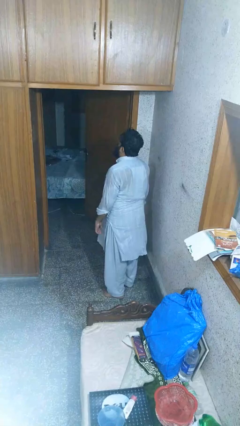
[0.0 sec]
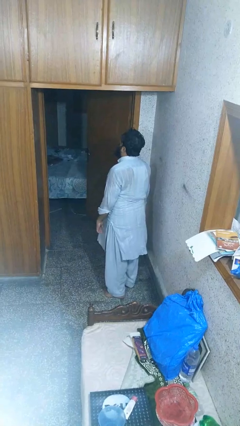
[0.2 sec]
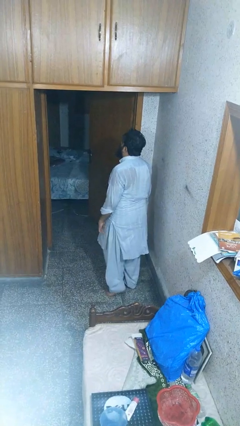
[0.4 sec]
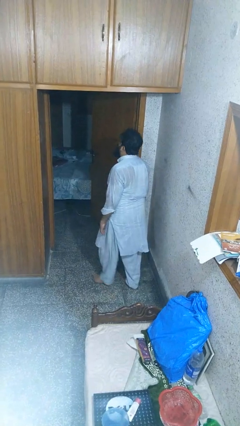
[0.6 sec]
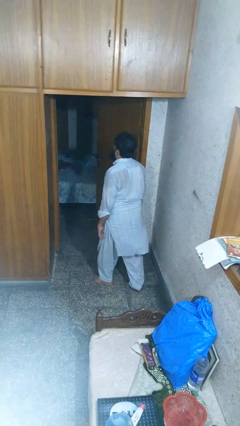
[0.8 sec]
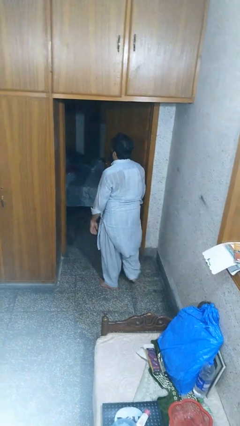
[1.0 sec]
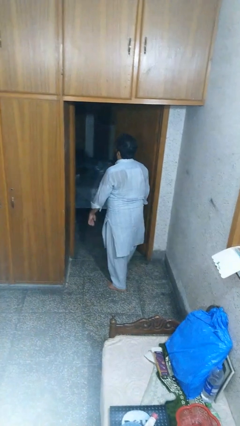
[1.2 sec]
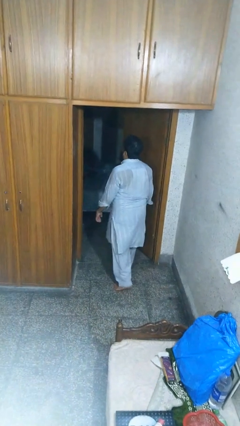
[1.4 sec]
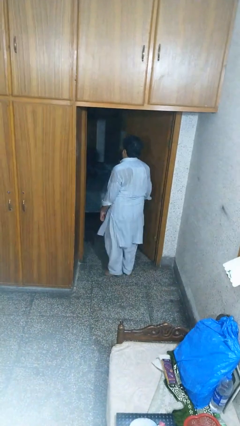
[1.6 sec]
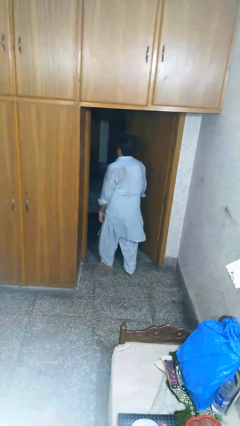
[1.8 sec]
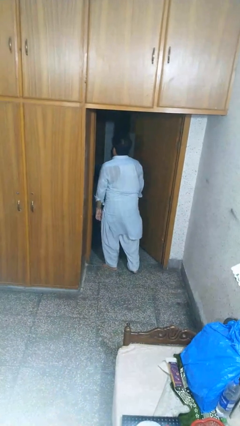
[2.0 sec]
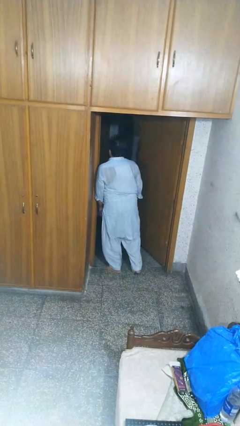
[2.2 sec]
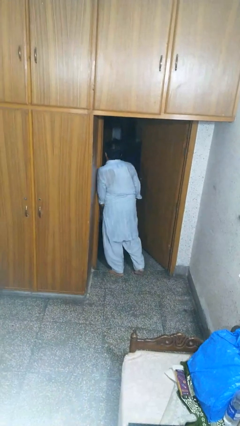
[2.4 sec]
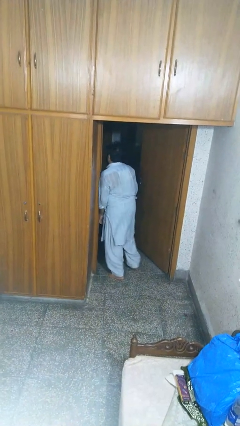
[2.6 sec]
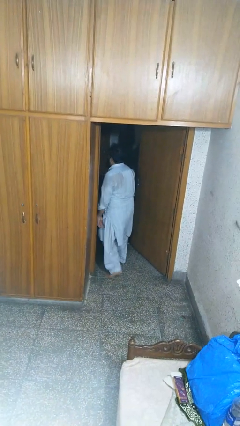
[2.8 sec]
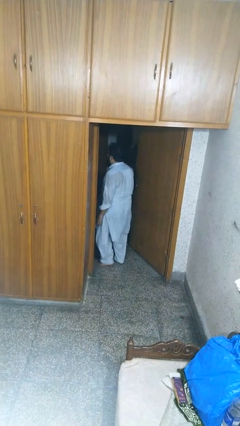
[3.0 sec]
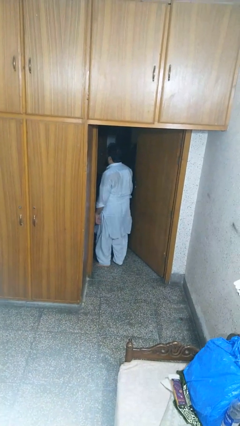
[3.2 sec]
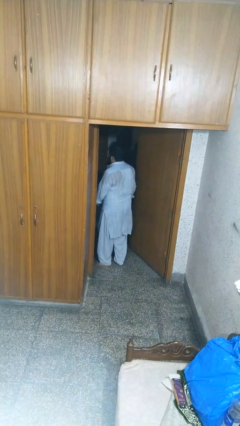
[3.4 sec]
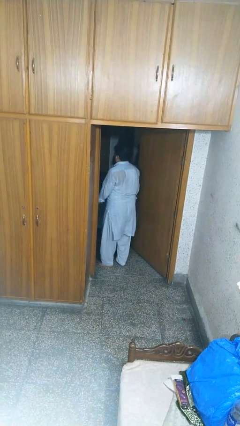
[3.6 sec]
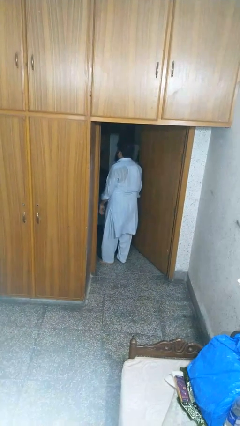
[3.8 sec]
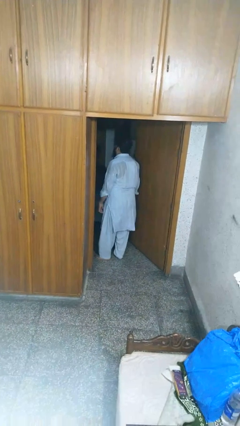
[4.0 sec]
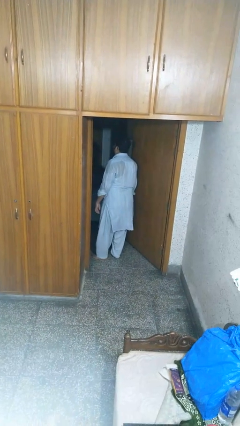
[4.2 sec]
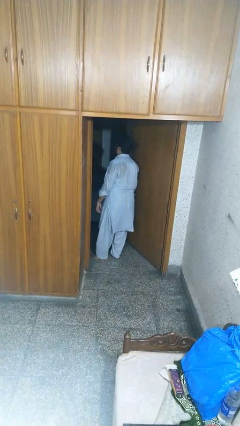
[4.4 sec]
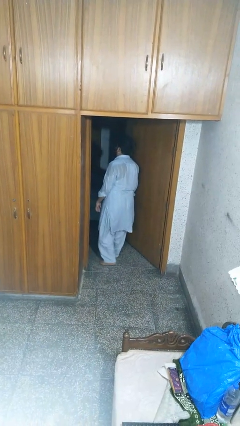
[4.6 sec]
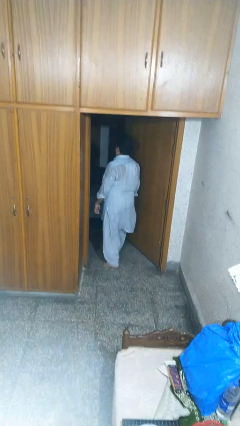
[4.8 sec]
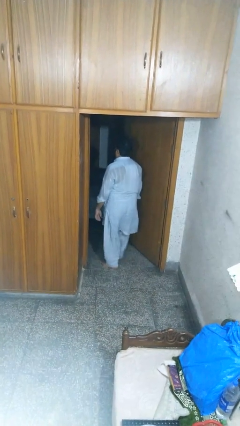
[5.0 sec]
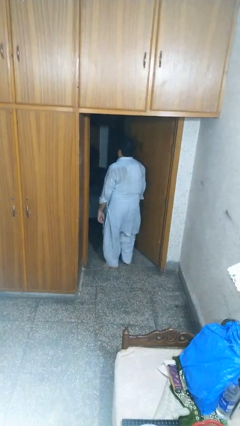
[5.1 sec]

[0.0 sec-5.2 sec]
person bumps into wall

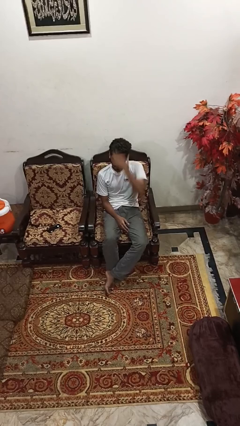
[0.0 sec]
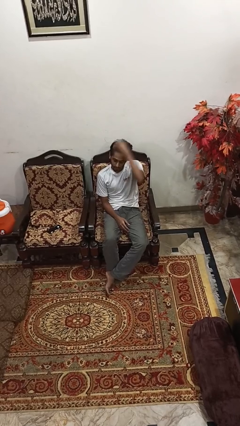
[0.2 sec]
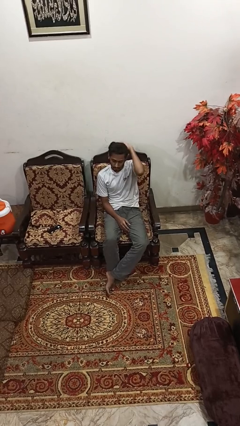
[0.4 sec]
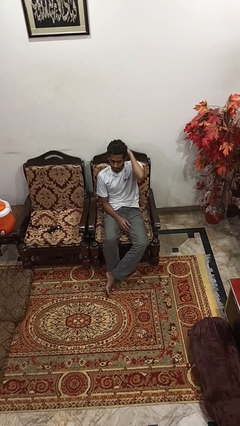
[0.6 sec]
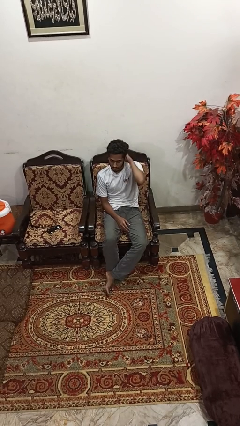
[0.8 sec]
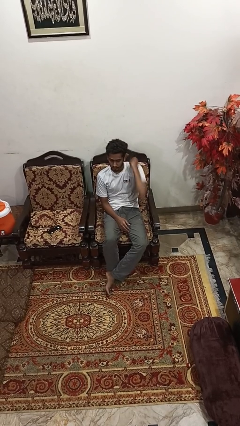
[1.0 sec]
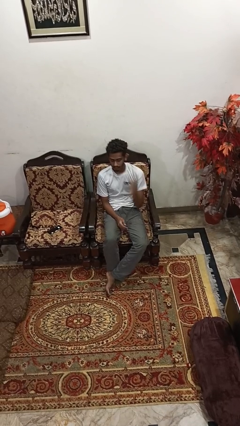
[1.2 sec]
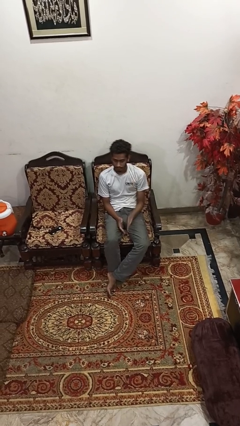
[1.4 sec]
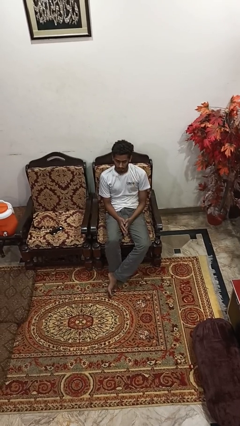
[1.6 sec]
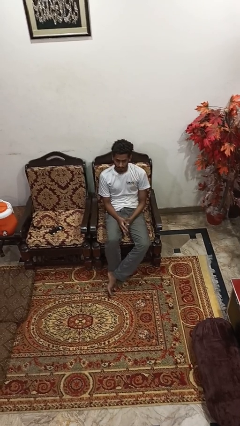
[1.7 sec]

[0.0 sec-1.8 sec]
person strokes hair

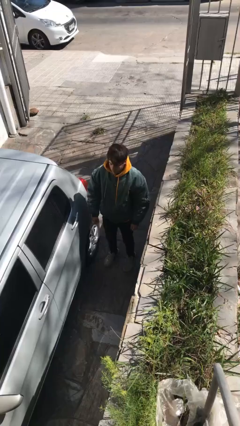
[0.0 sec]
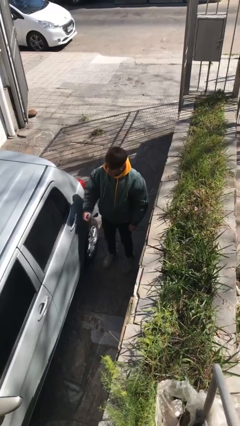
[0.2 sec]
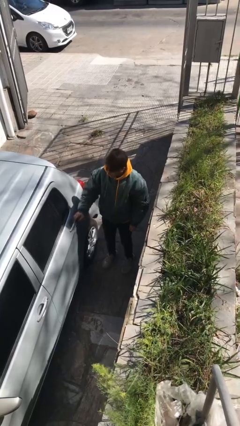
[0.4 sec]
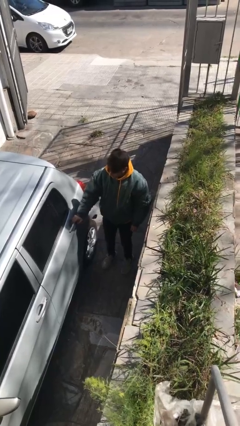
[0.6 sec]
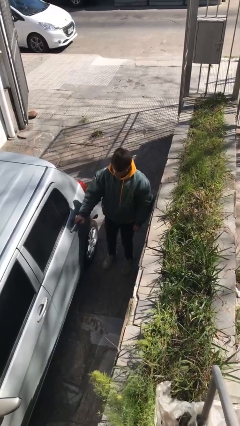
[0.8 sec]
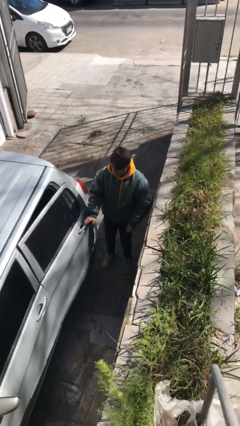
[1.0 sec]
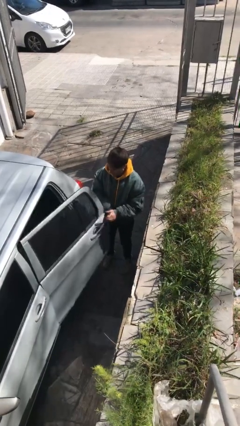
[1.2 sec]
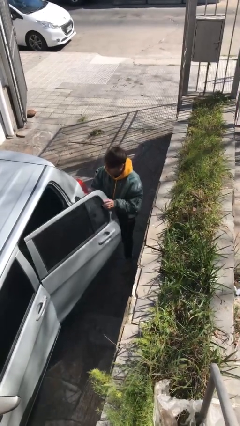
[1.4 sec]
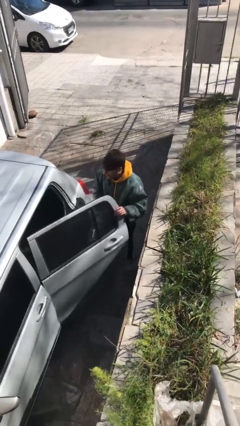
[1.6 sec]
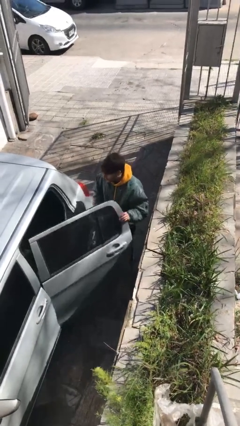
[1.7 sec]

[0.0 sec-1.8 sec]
person opens car door

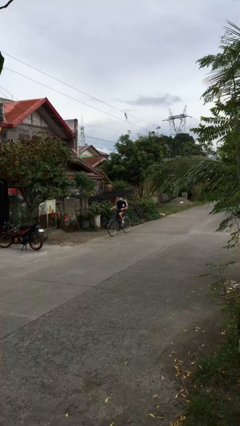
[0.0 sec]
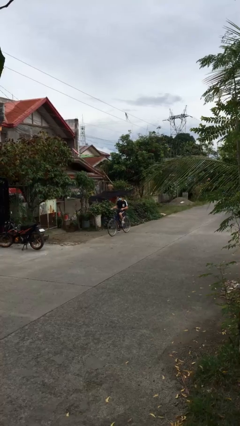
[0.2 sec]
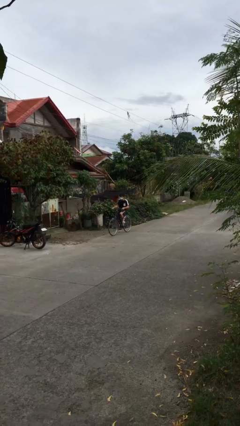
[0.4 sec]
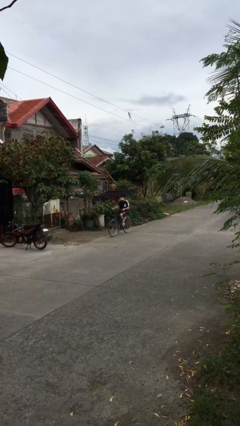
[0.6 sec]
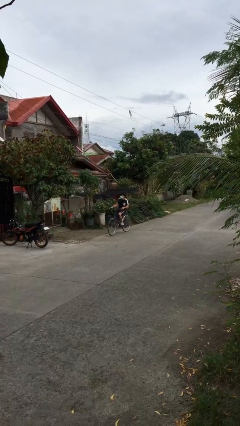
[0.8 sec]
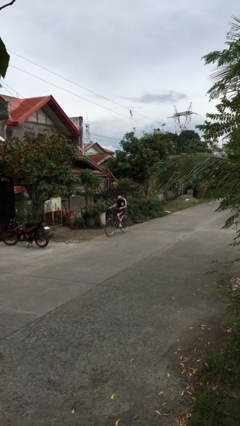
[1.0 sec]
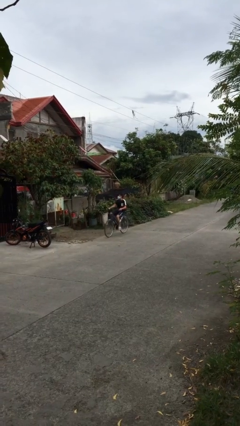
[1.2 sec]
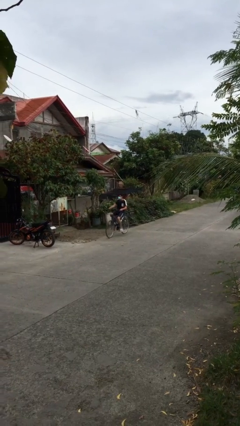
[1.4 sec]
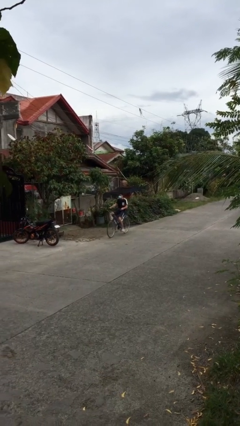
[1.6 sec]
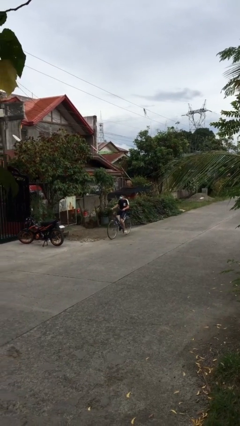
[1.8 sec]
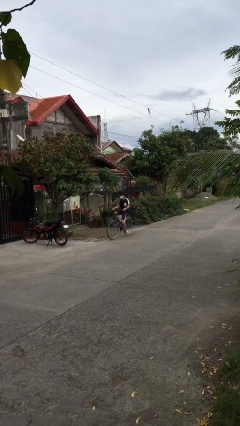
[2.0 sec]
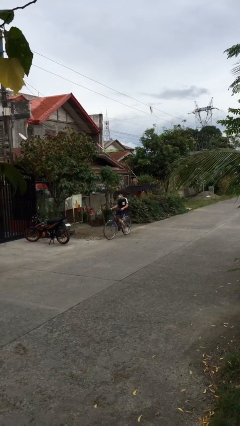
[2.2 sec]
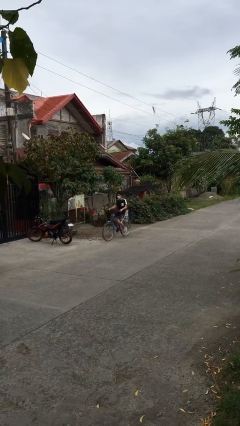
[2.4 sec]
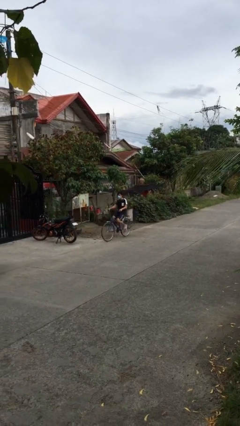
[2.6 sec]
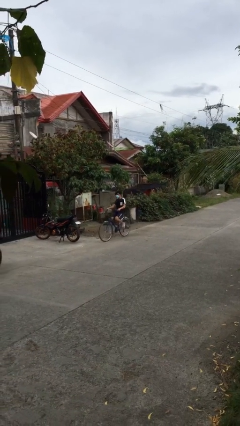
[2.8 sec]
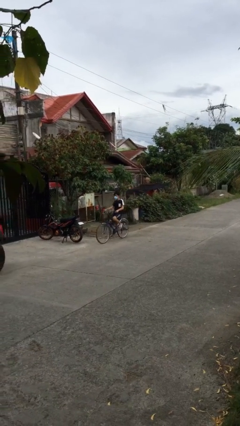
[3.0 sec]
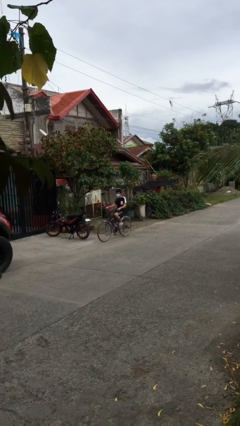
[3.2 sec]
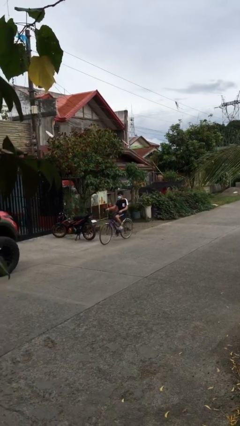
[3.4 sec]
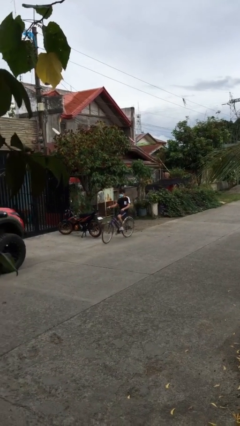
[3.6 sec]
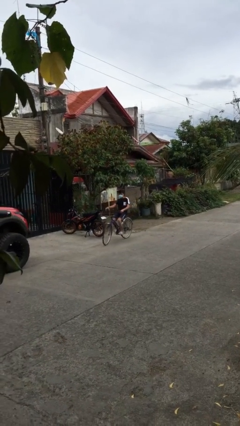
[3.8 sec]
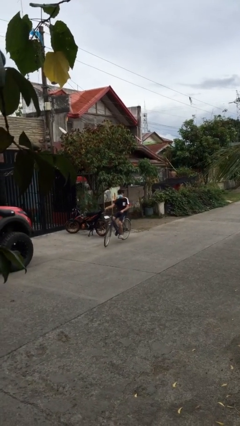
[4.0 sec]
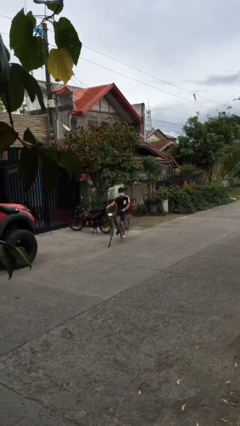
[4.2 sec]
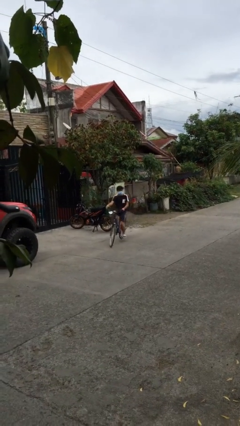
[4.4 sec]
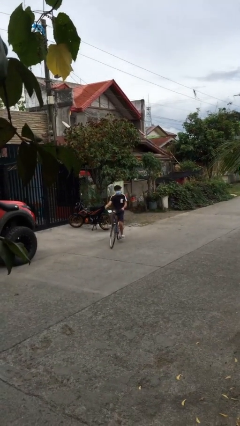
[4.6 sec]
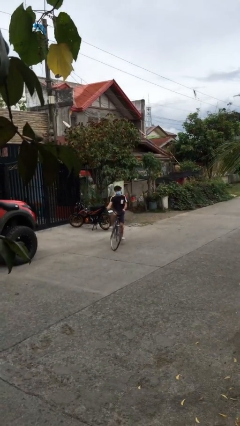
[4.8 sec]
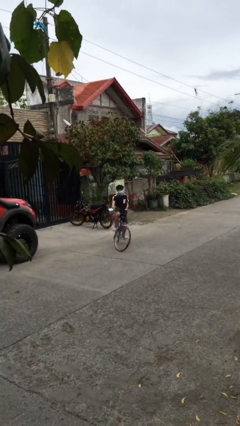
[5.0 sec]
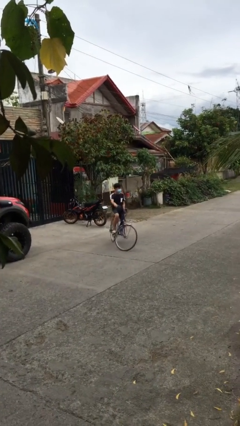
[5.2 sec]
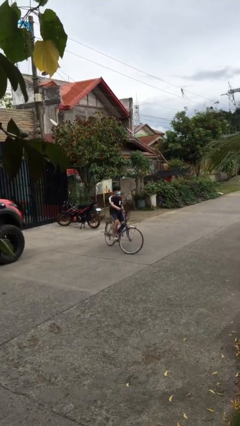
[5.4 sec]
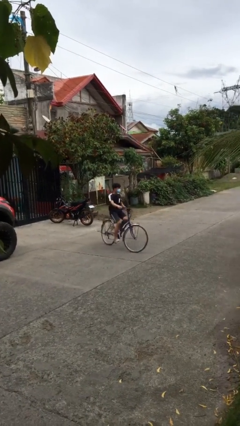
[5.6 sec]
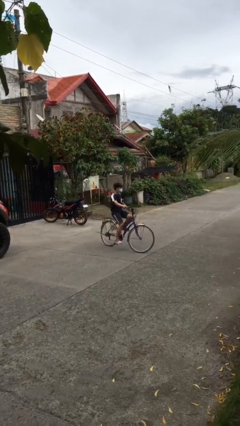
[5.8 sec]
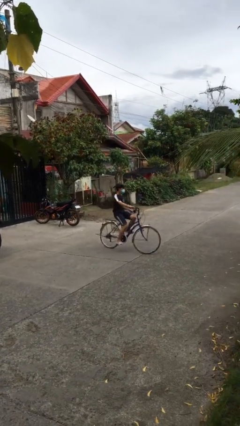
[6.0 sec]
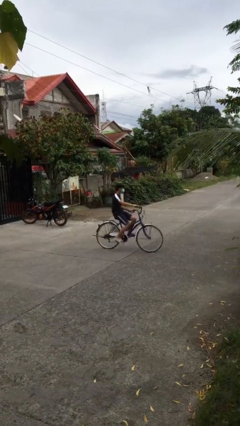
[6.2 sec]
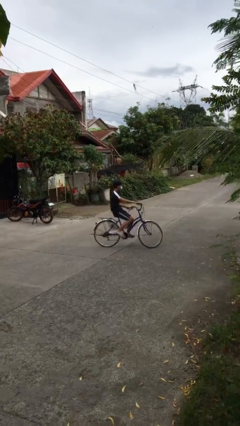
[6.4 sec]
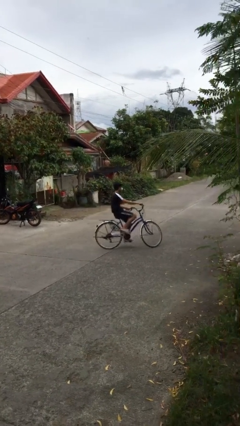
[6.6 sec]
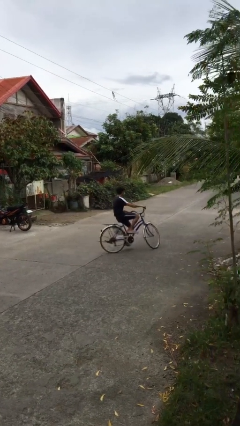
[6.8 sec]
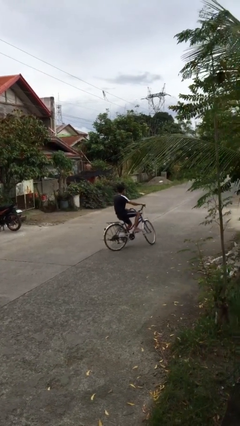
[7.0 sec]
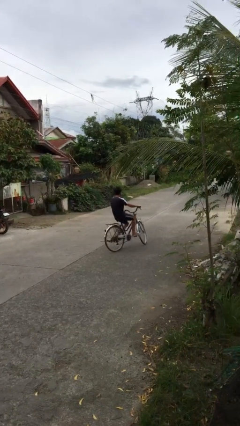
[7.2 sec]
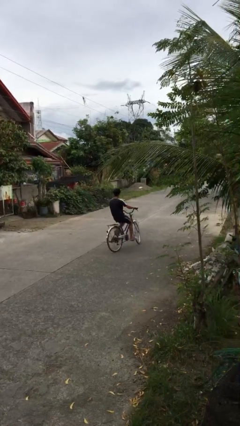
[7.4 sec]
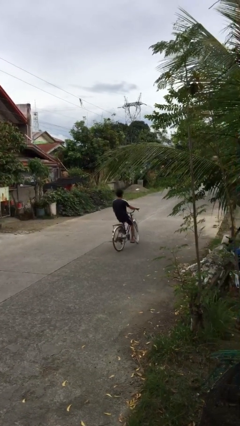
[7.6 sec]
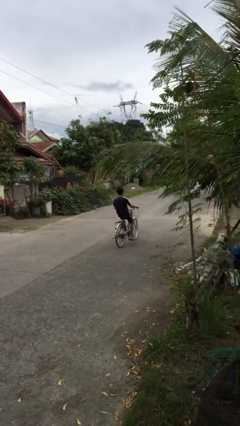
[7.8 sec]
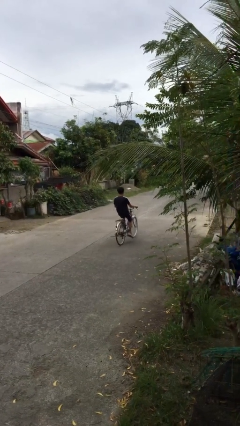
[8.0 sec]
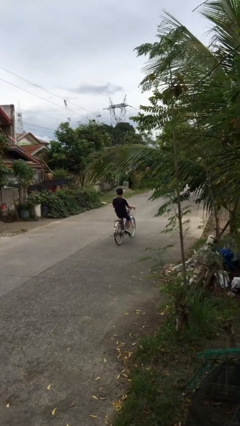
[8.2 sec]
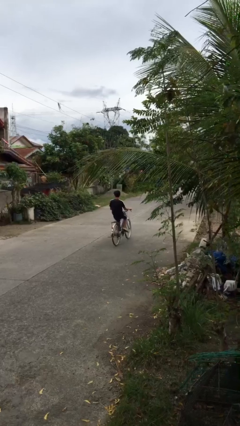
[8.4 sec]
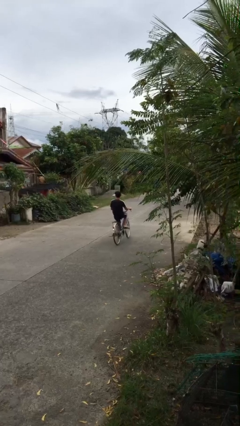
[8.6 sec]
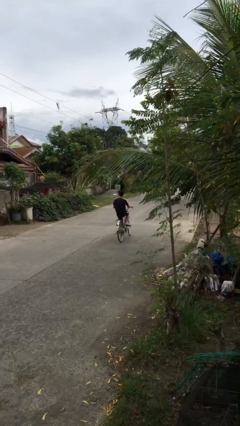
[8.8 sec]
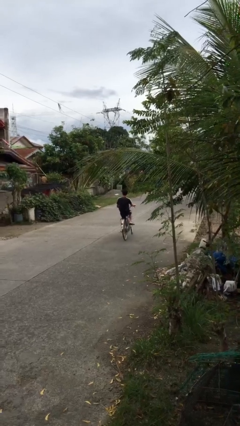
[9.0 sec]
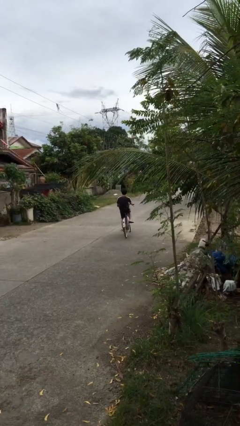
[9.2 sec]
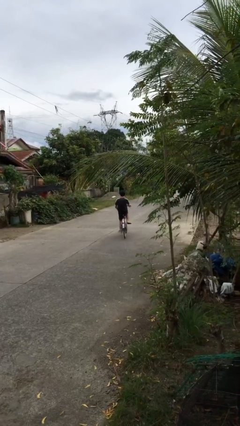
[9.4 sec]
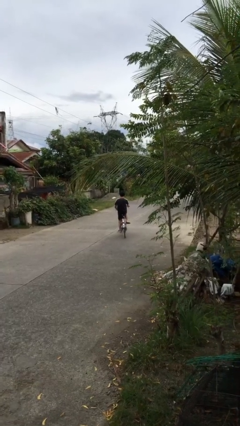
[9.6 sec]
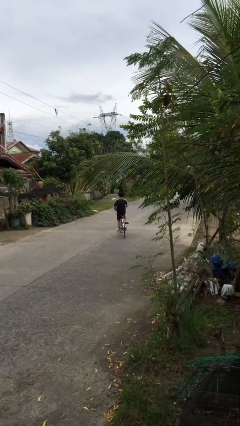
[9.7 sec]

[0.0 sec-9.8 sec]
person rides bicycle
